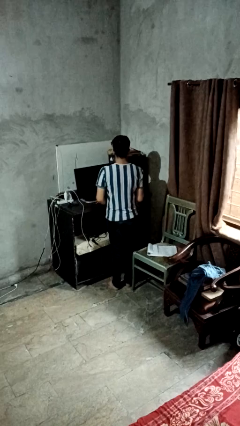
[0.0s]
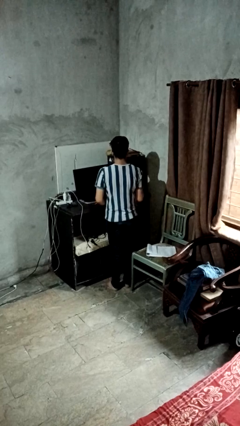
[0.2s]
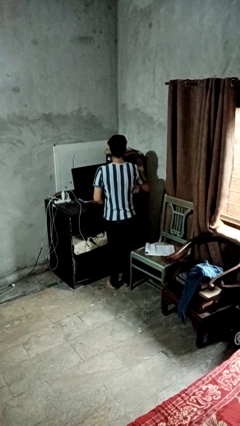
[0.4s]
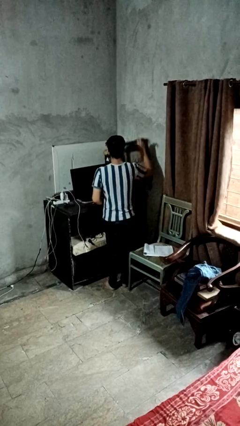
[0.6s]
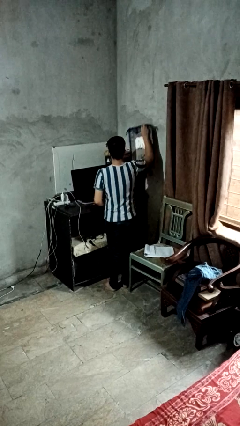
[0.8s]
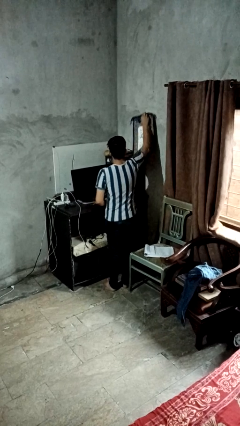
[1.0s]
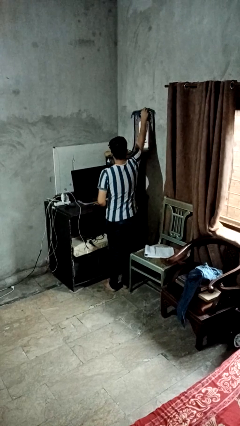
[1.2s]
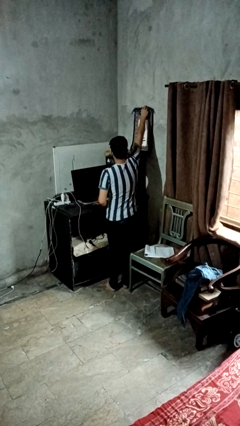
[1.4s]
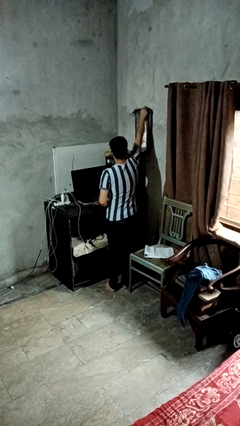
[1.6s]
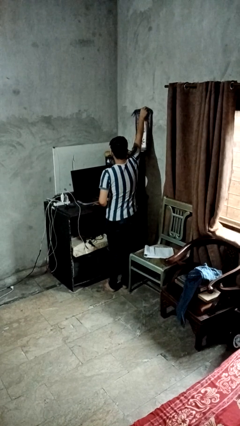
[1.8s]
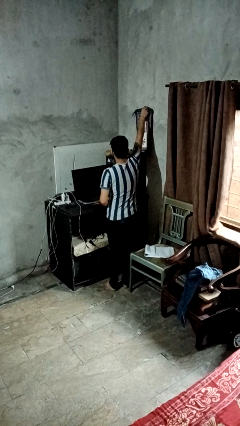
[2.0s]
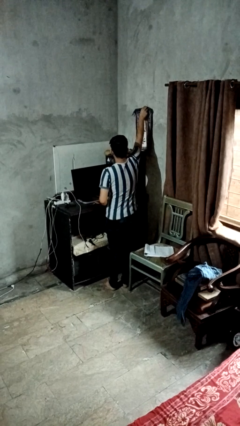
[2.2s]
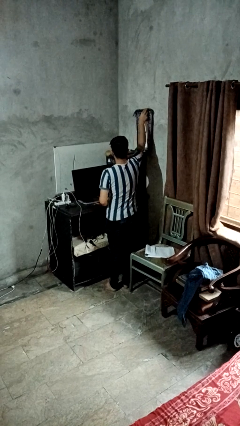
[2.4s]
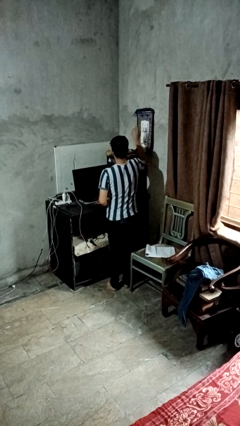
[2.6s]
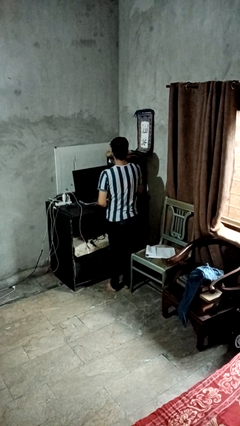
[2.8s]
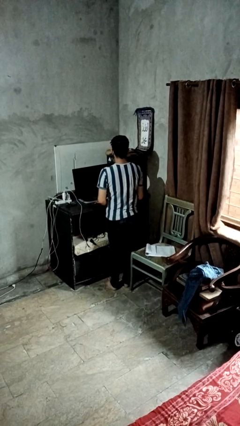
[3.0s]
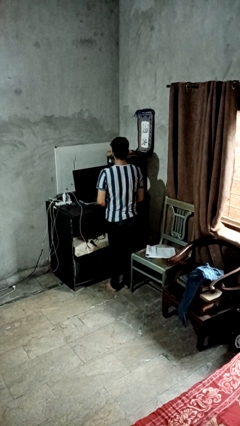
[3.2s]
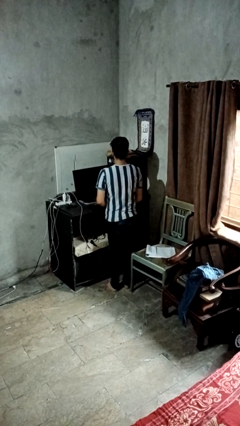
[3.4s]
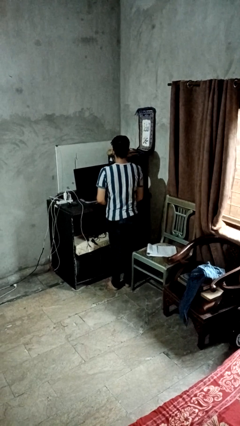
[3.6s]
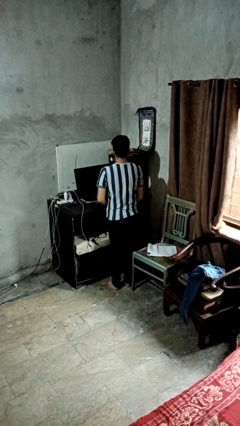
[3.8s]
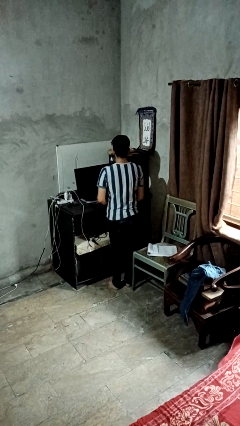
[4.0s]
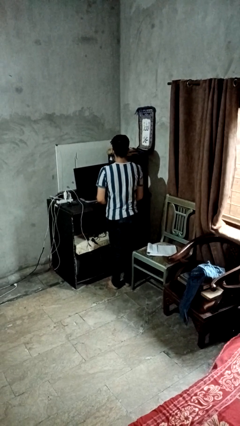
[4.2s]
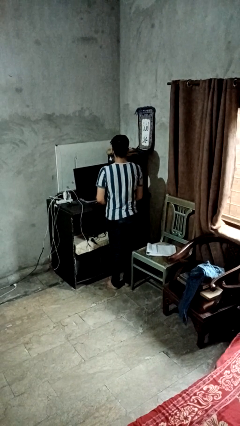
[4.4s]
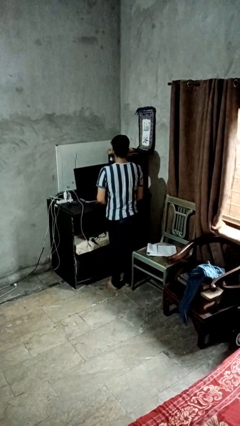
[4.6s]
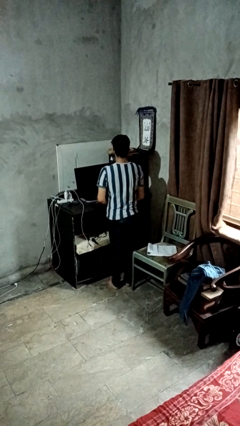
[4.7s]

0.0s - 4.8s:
person puts up picture frame

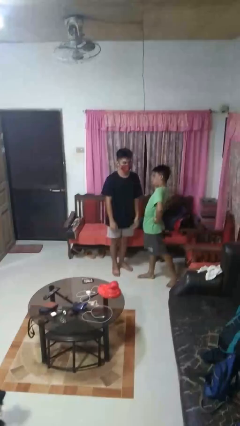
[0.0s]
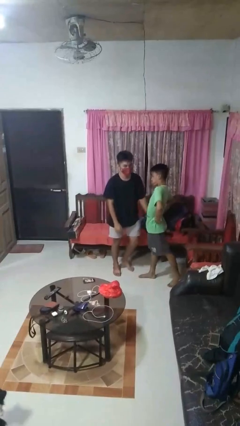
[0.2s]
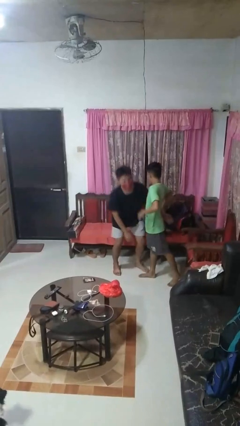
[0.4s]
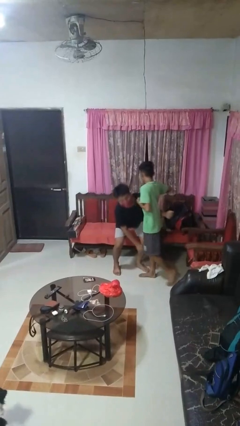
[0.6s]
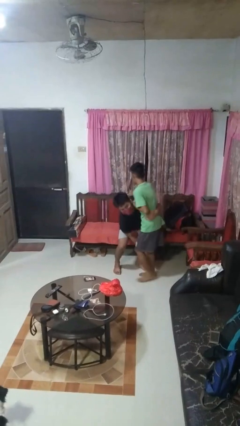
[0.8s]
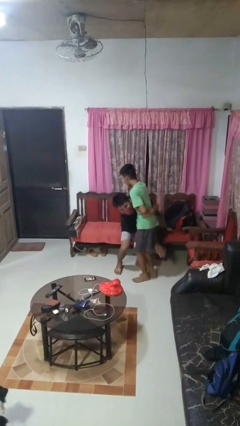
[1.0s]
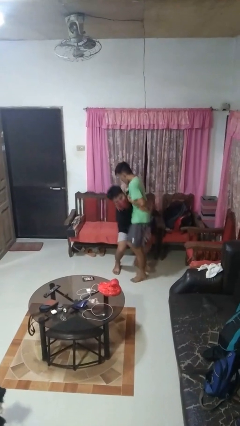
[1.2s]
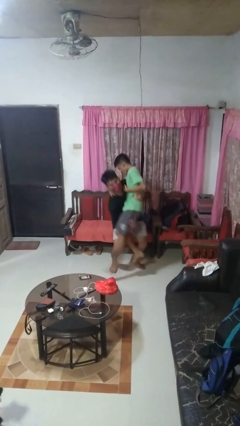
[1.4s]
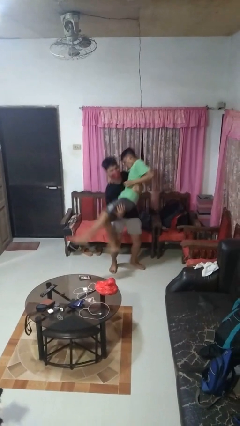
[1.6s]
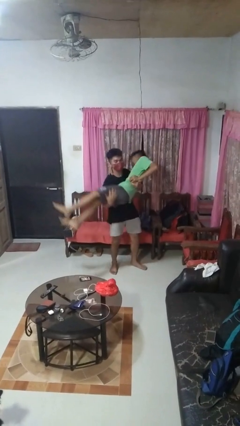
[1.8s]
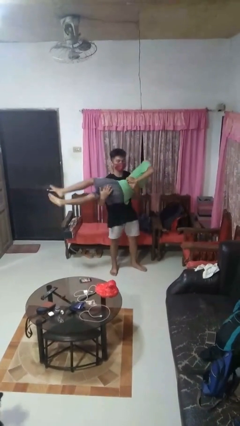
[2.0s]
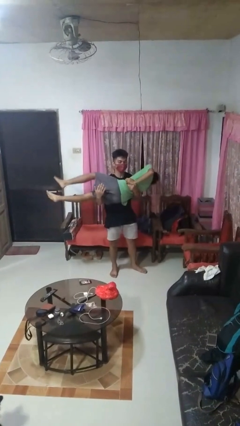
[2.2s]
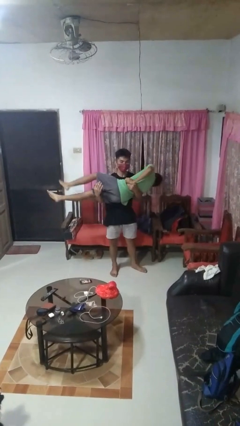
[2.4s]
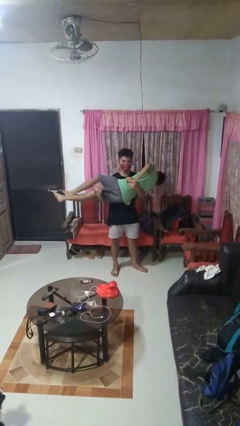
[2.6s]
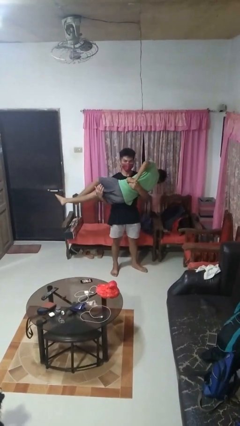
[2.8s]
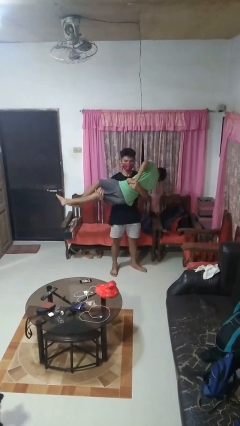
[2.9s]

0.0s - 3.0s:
person picks up person

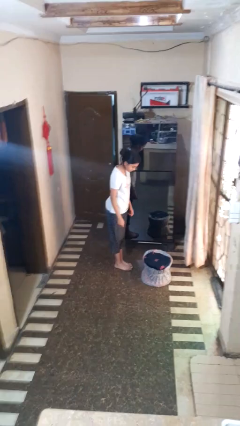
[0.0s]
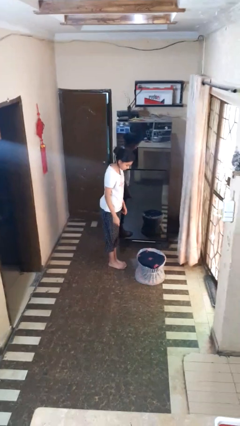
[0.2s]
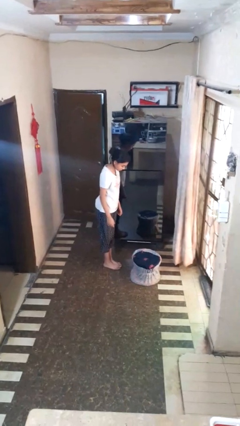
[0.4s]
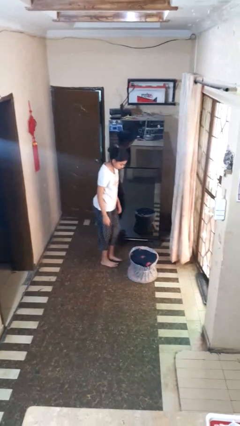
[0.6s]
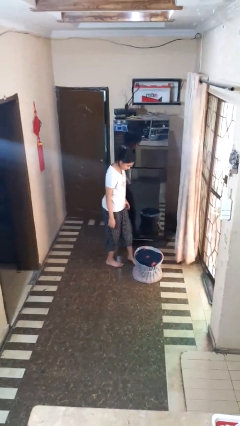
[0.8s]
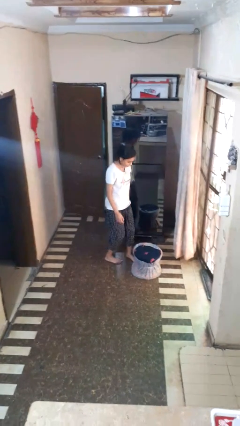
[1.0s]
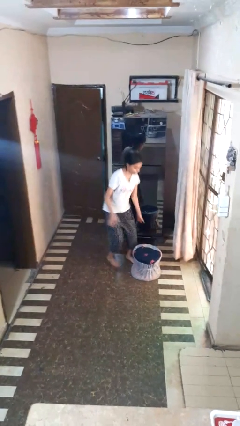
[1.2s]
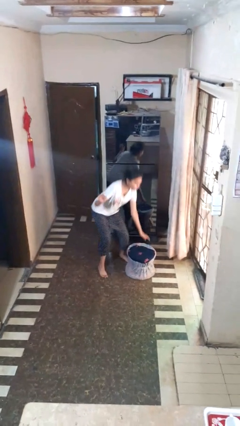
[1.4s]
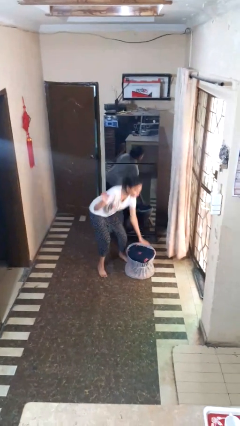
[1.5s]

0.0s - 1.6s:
person trips on object on floor

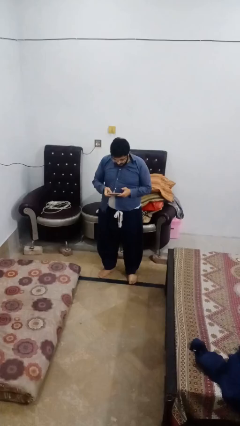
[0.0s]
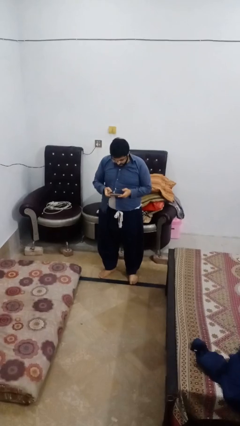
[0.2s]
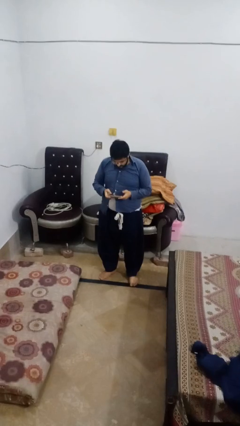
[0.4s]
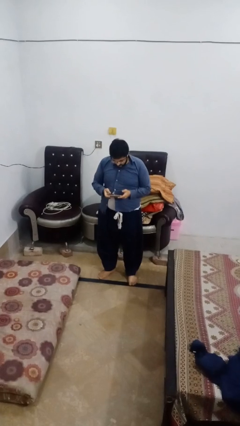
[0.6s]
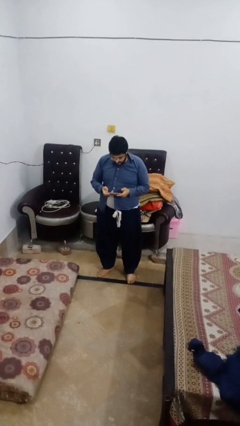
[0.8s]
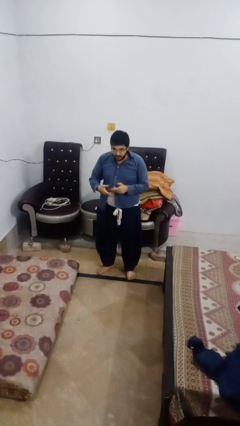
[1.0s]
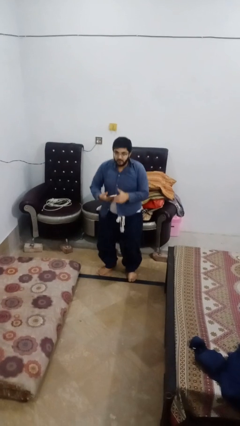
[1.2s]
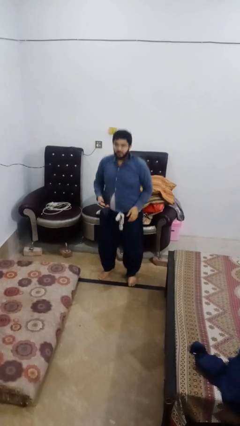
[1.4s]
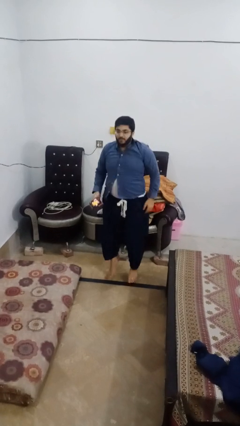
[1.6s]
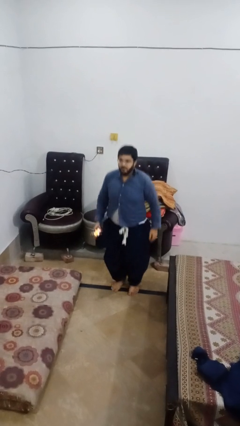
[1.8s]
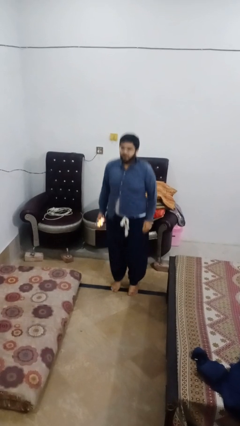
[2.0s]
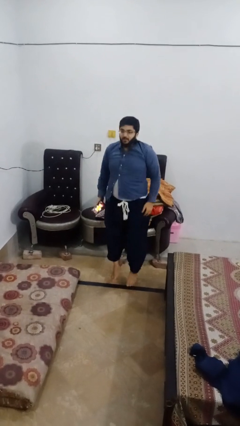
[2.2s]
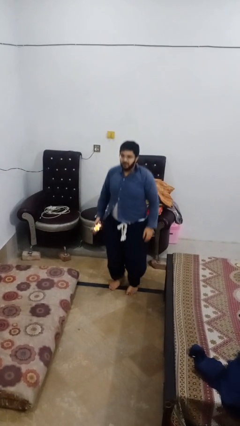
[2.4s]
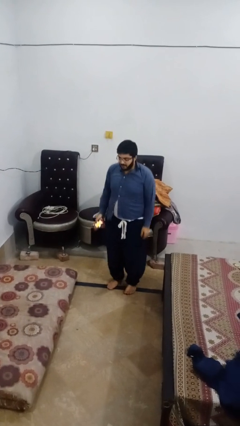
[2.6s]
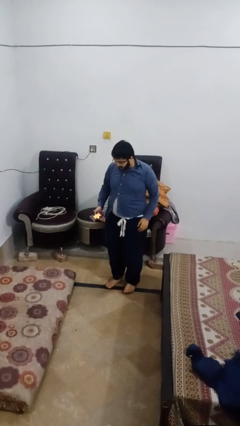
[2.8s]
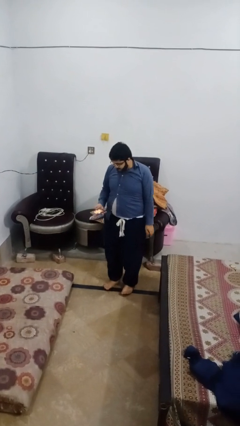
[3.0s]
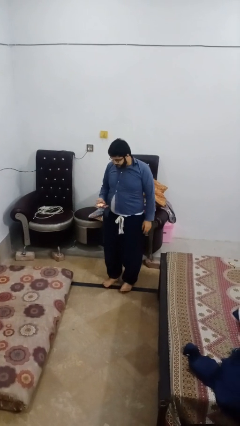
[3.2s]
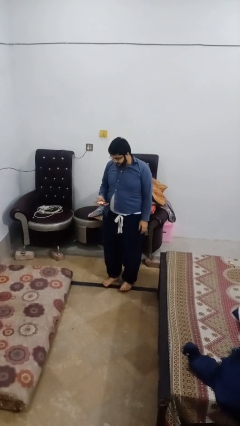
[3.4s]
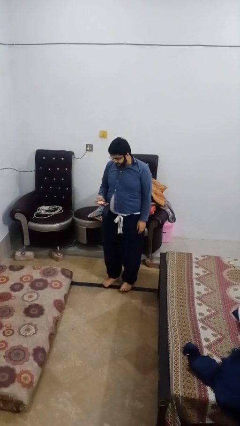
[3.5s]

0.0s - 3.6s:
person jumps

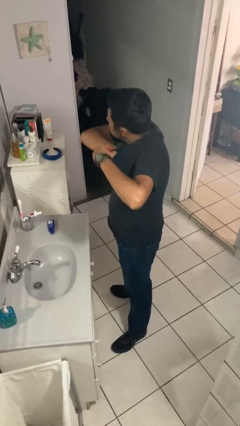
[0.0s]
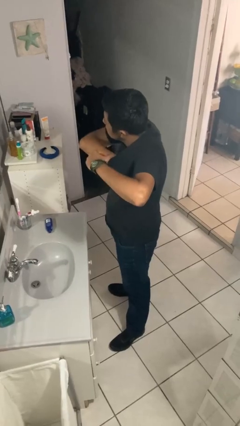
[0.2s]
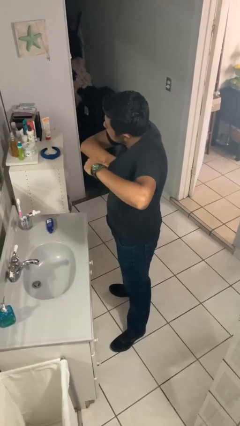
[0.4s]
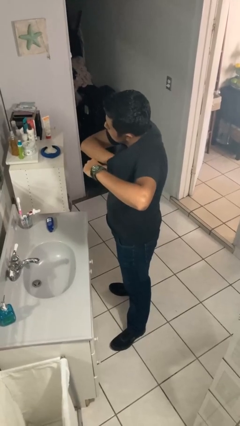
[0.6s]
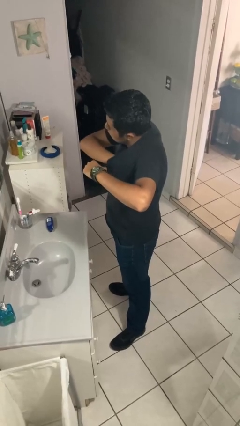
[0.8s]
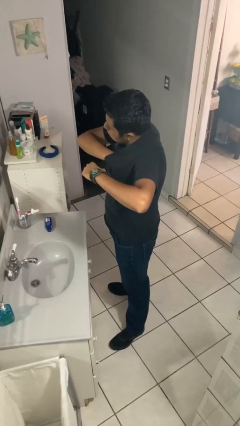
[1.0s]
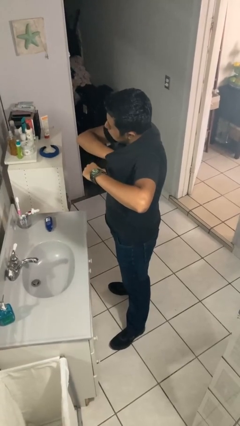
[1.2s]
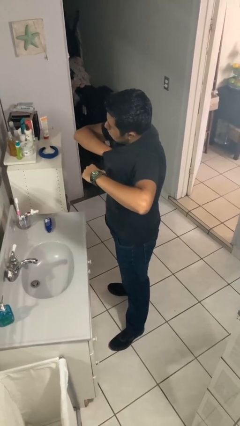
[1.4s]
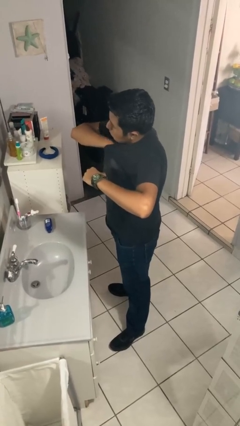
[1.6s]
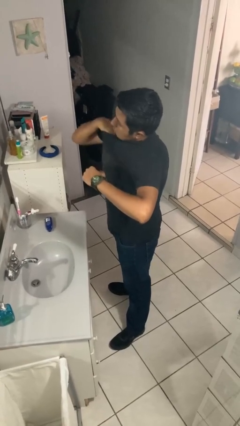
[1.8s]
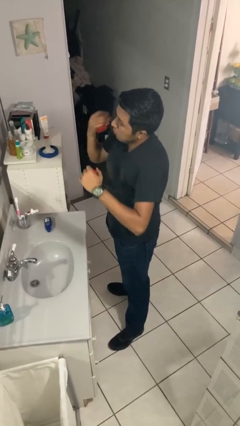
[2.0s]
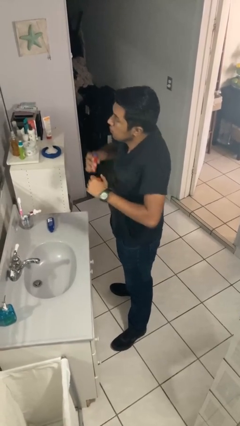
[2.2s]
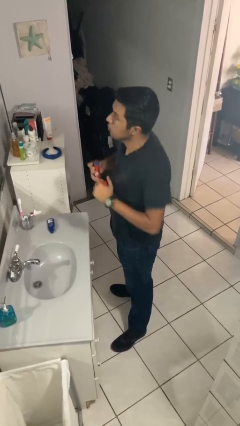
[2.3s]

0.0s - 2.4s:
person applies deodorant

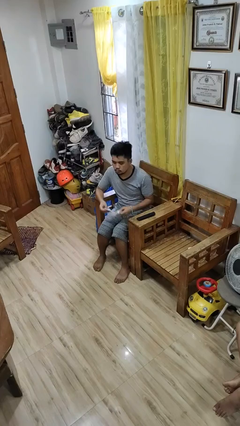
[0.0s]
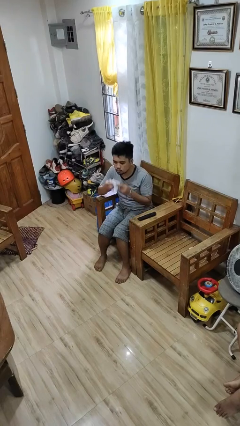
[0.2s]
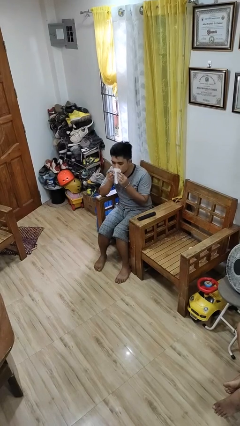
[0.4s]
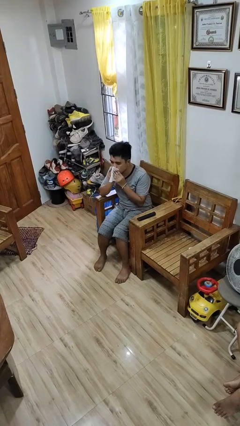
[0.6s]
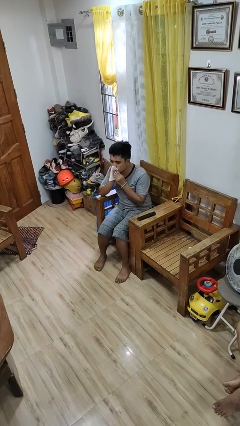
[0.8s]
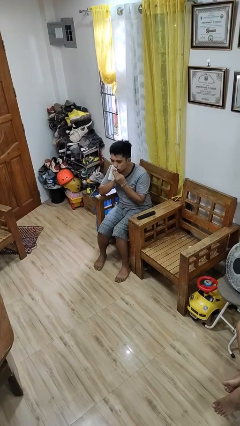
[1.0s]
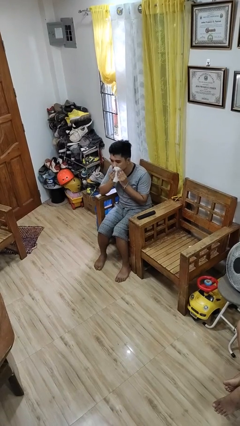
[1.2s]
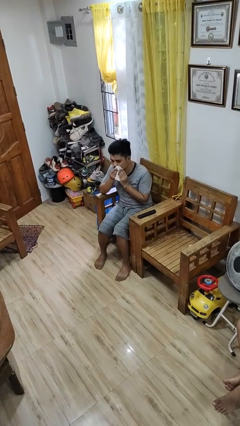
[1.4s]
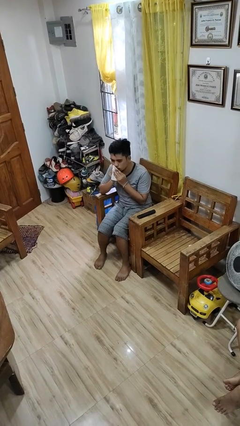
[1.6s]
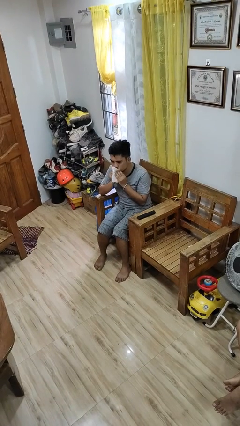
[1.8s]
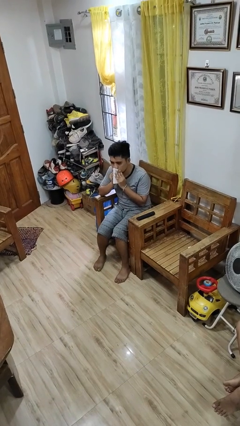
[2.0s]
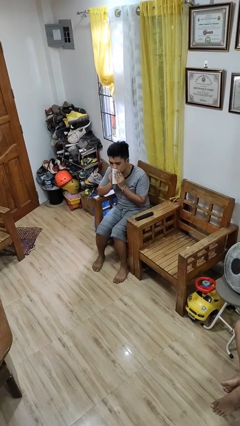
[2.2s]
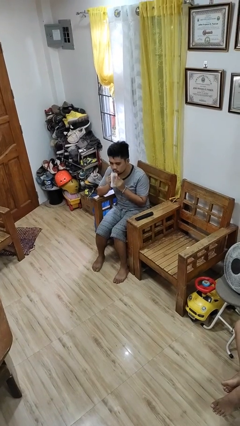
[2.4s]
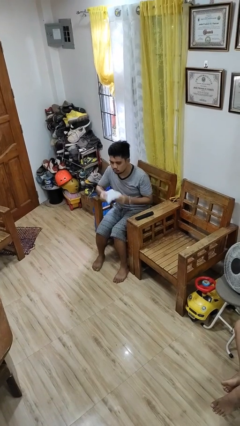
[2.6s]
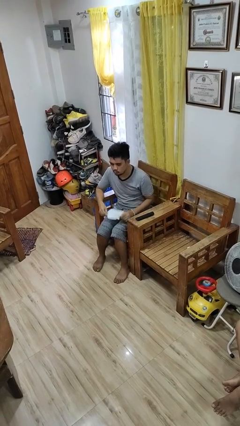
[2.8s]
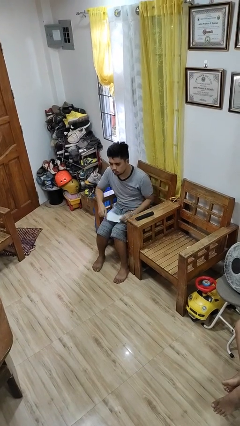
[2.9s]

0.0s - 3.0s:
person wipes mouth with napkin
